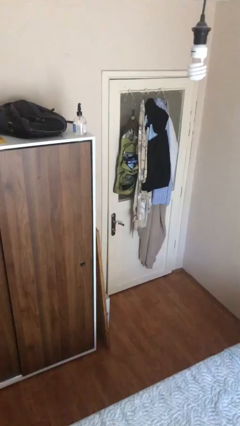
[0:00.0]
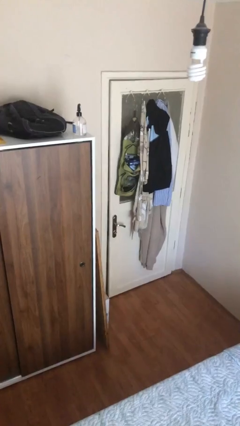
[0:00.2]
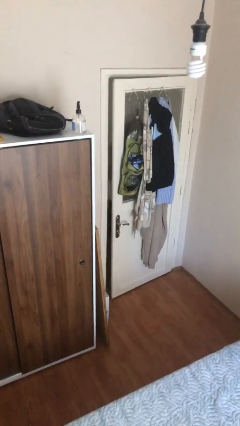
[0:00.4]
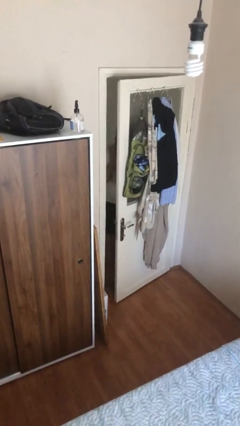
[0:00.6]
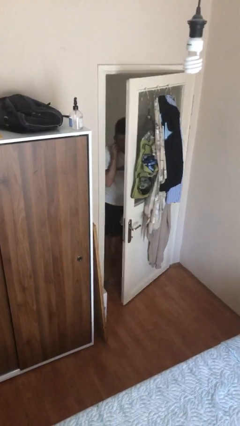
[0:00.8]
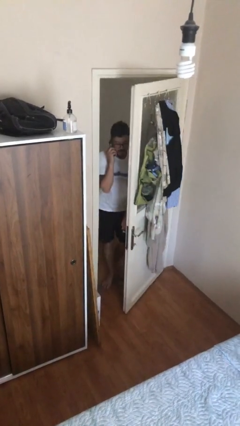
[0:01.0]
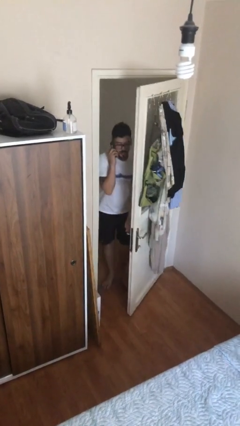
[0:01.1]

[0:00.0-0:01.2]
person opens facility door

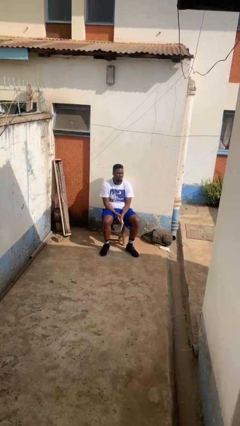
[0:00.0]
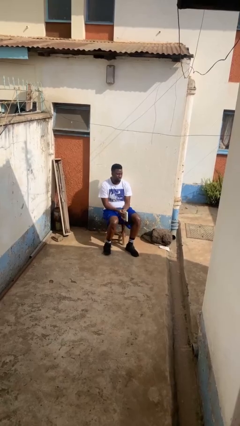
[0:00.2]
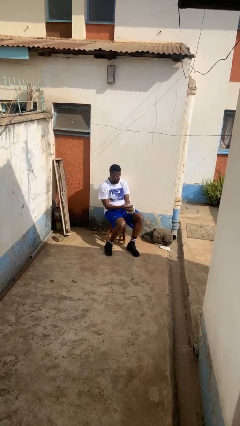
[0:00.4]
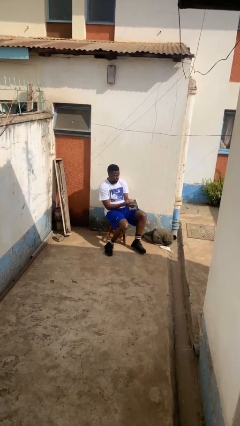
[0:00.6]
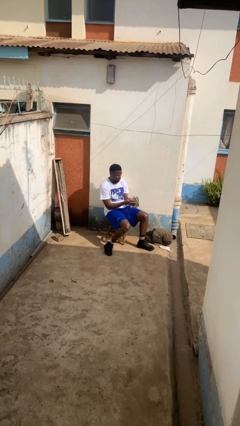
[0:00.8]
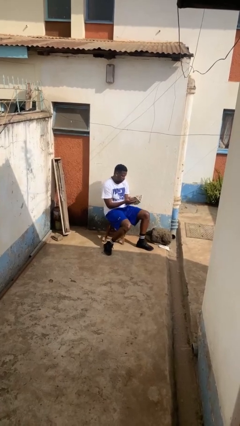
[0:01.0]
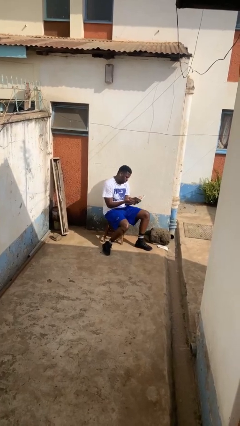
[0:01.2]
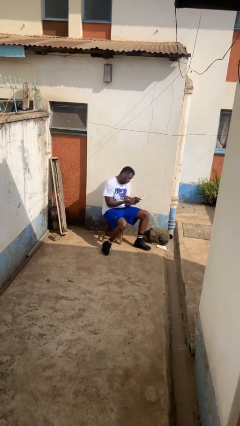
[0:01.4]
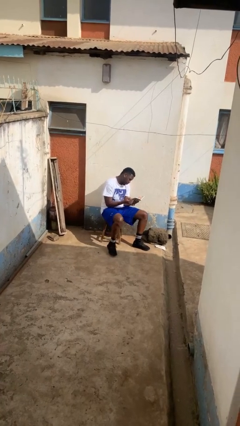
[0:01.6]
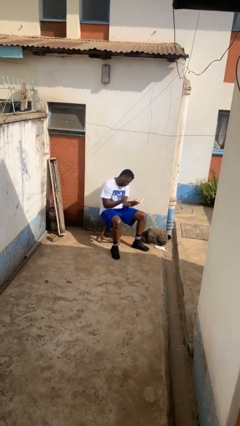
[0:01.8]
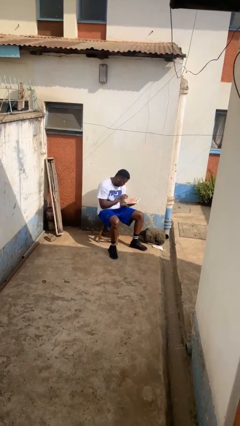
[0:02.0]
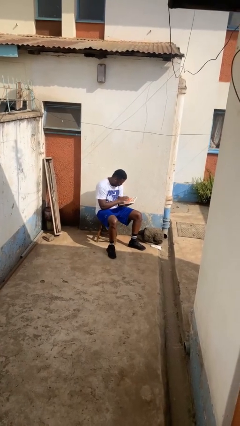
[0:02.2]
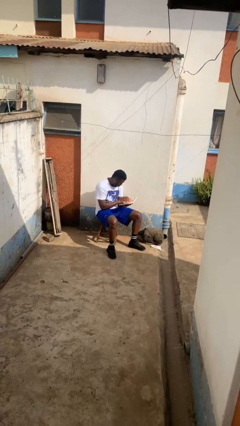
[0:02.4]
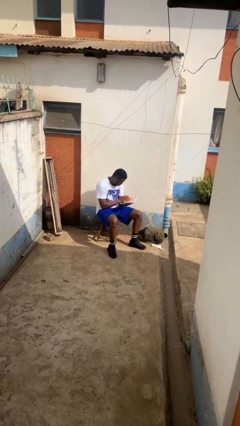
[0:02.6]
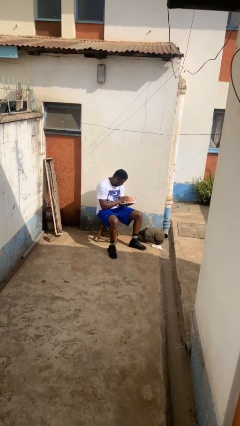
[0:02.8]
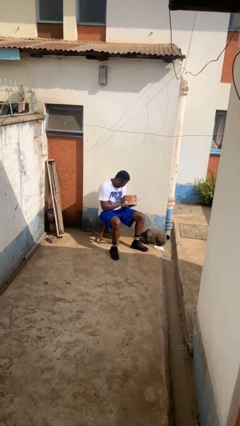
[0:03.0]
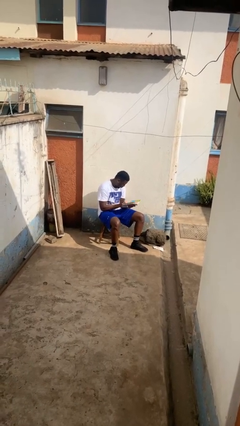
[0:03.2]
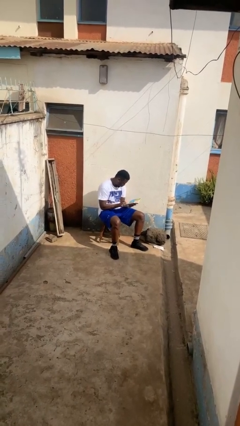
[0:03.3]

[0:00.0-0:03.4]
person reads book

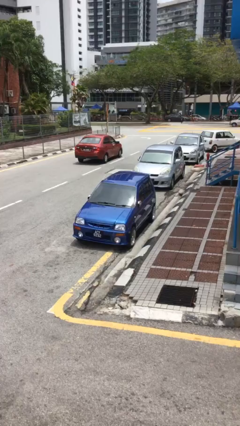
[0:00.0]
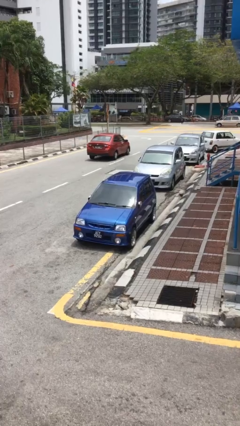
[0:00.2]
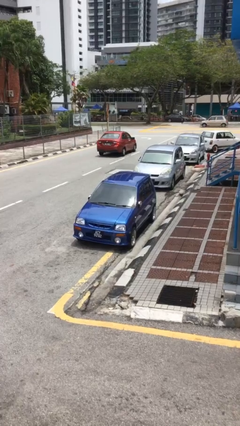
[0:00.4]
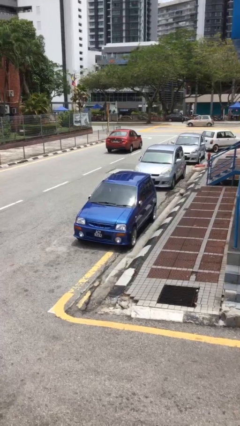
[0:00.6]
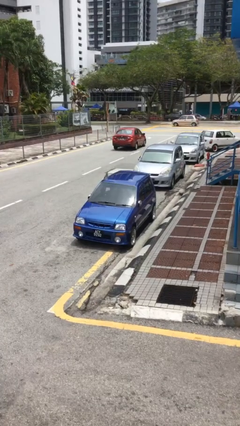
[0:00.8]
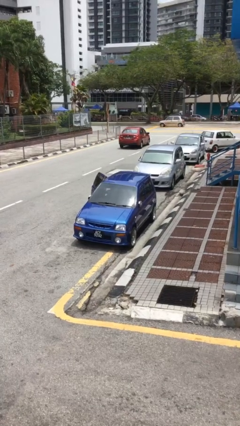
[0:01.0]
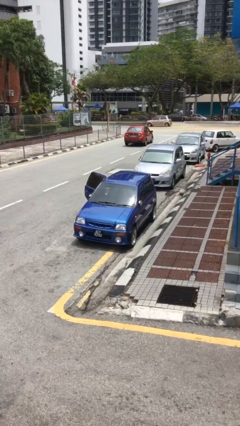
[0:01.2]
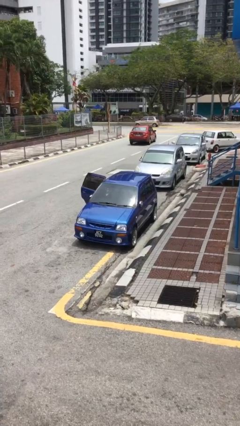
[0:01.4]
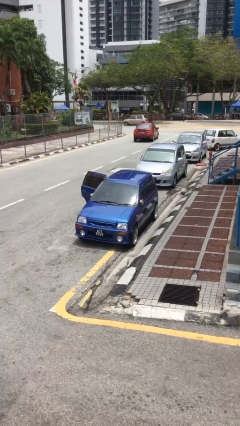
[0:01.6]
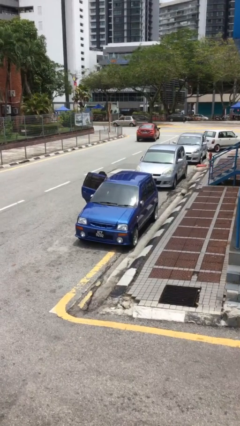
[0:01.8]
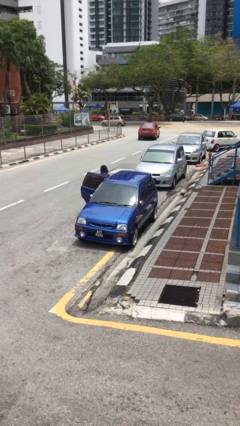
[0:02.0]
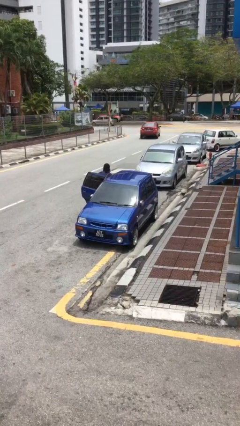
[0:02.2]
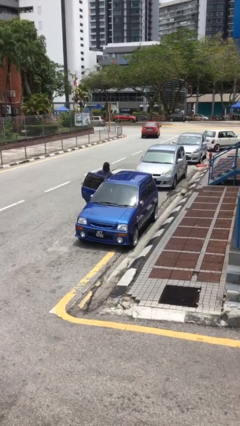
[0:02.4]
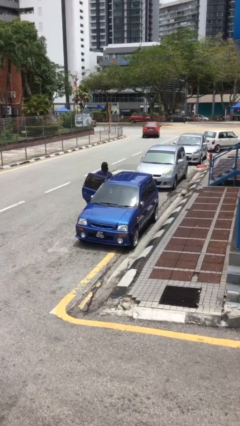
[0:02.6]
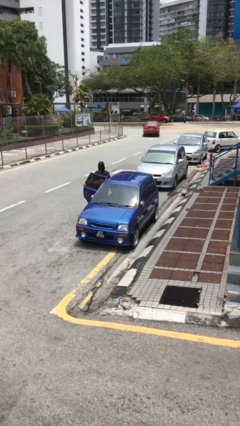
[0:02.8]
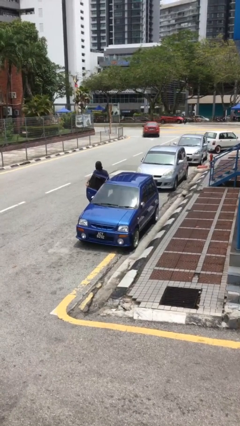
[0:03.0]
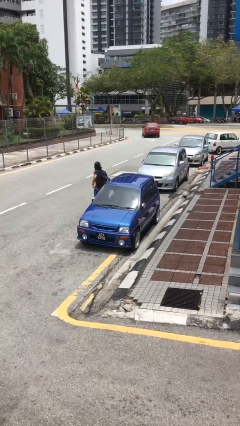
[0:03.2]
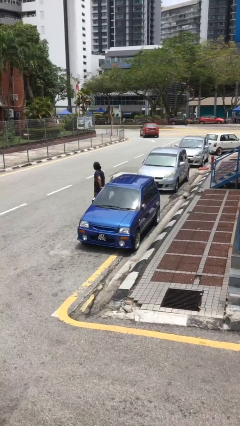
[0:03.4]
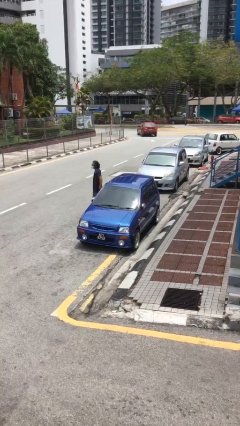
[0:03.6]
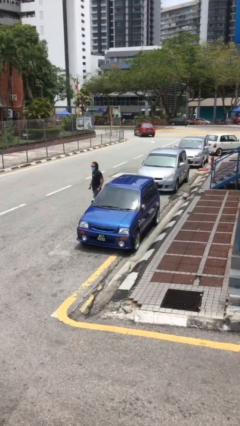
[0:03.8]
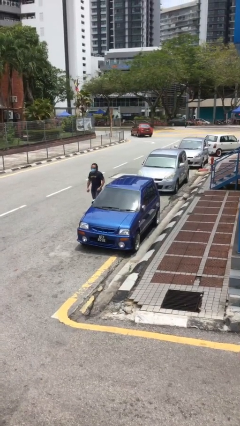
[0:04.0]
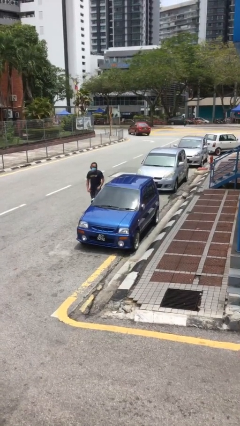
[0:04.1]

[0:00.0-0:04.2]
car drops off person

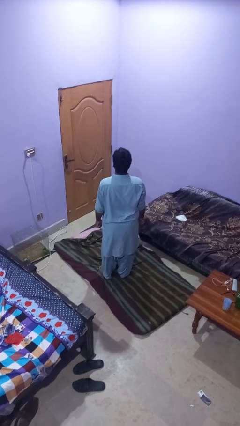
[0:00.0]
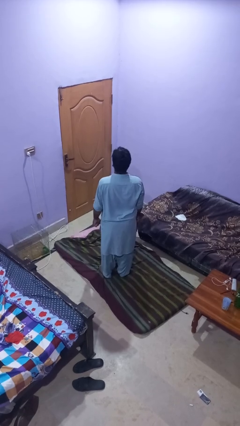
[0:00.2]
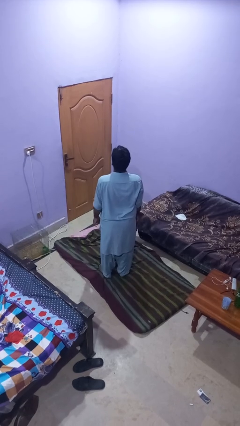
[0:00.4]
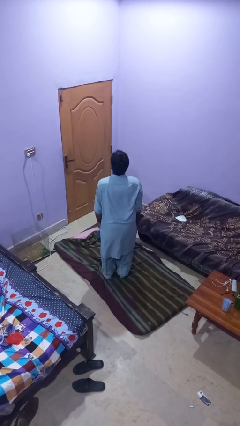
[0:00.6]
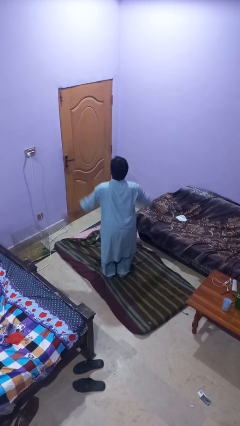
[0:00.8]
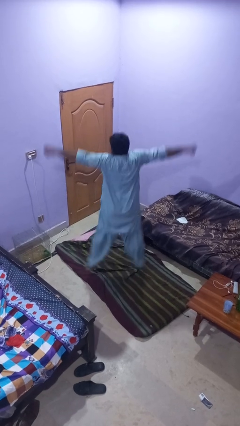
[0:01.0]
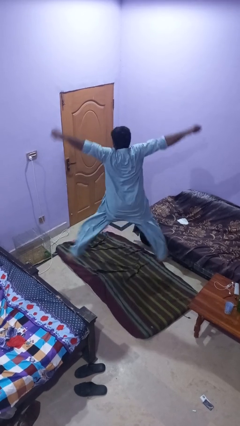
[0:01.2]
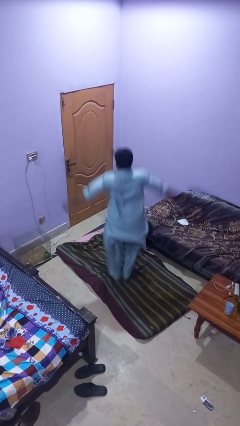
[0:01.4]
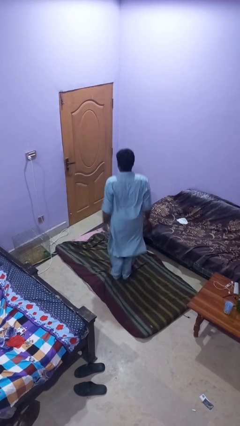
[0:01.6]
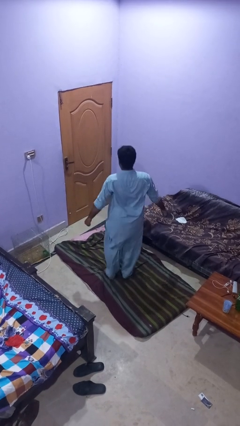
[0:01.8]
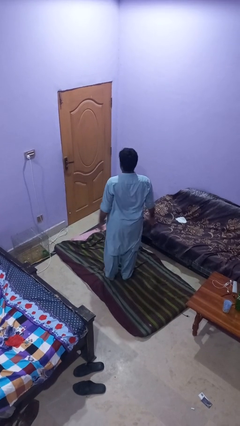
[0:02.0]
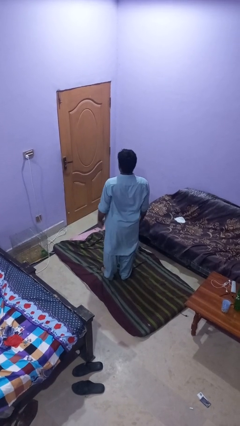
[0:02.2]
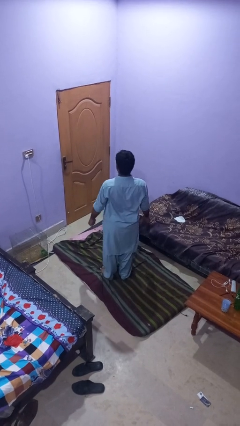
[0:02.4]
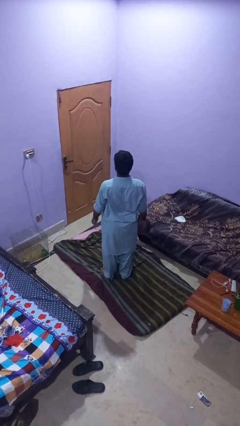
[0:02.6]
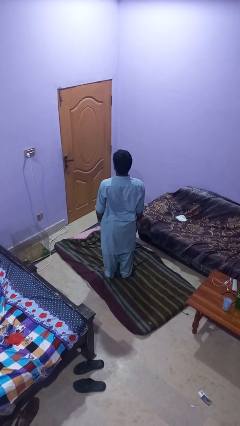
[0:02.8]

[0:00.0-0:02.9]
person exercises with jumping jacks

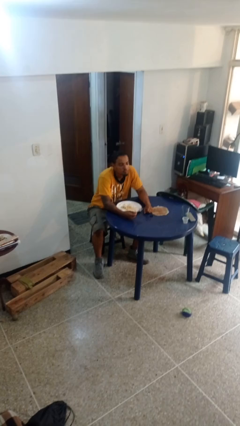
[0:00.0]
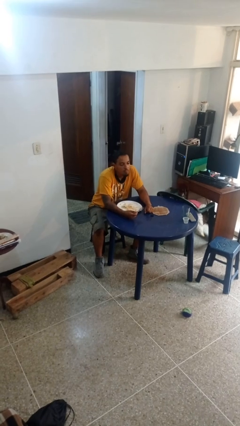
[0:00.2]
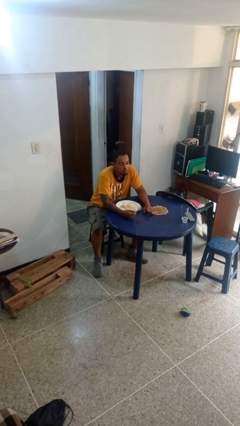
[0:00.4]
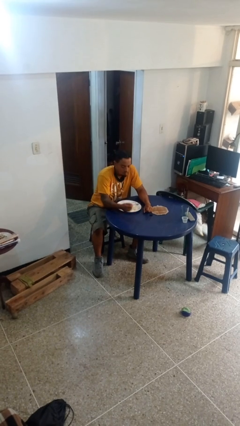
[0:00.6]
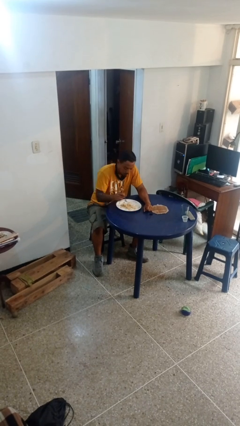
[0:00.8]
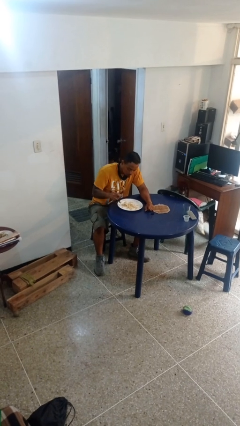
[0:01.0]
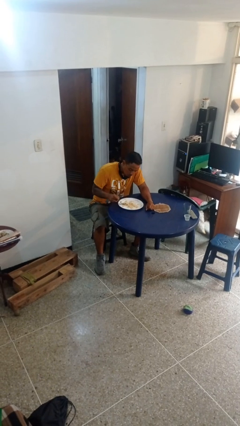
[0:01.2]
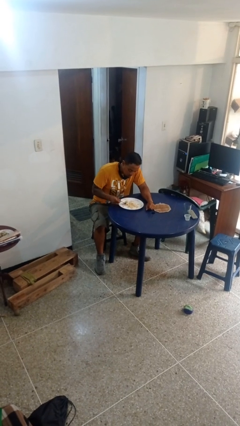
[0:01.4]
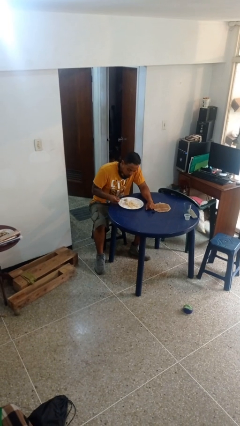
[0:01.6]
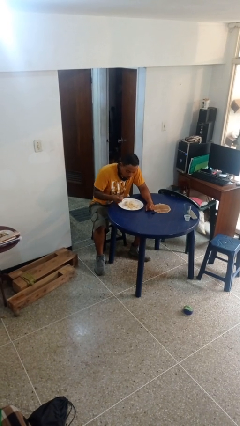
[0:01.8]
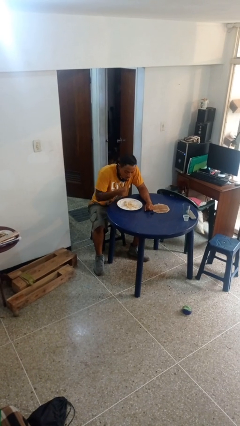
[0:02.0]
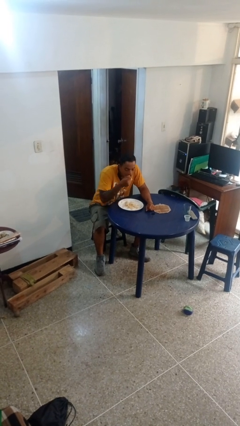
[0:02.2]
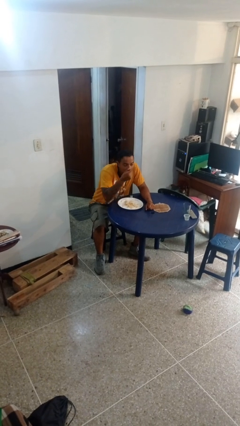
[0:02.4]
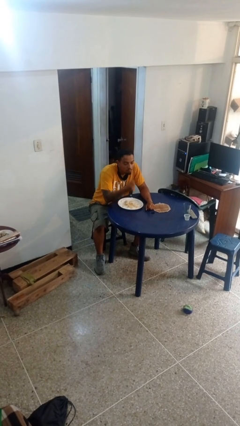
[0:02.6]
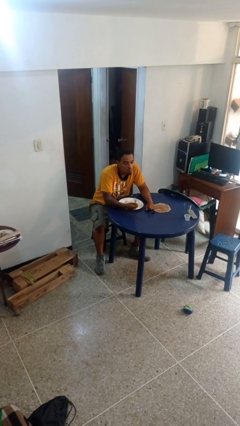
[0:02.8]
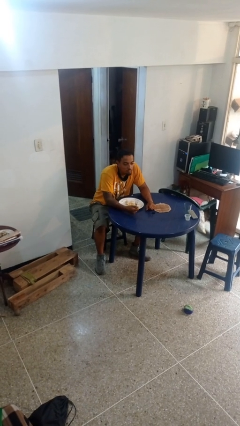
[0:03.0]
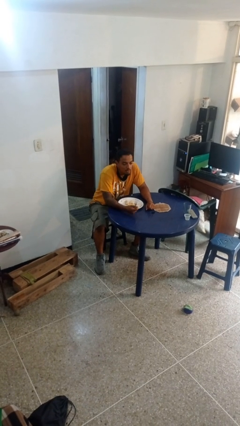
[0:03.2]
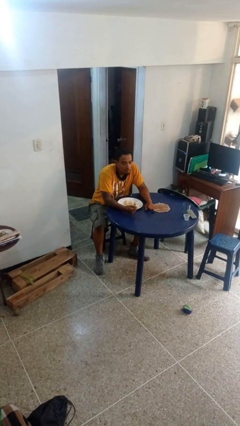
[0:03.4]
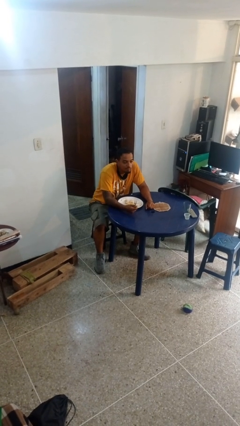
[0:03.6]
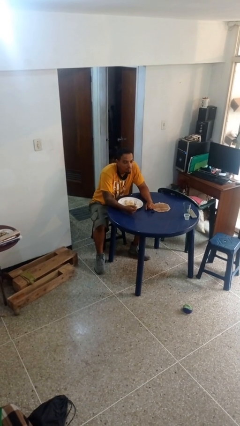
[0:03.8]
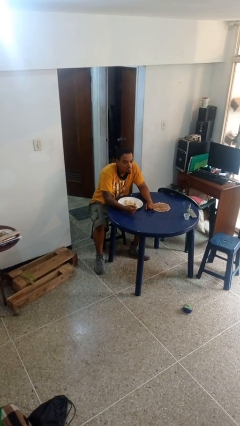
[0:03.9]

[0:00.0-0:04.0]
person eats with utensil

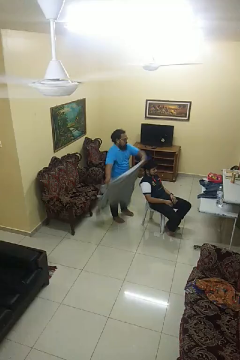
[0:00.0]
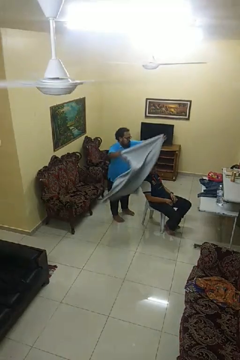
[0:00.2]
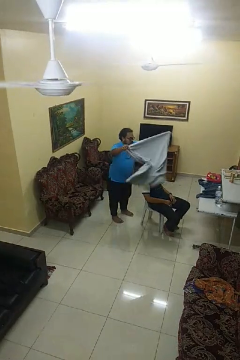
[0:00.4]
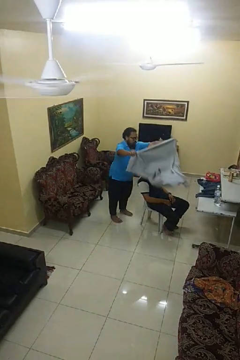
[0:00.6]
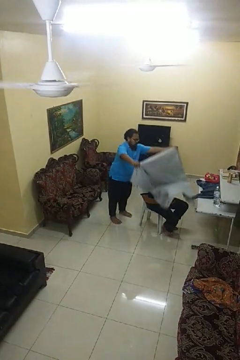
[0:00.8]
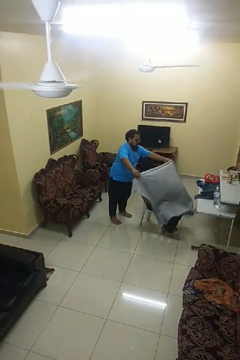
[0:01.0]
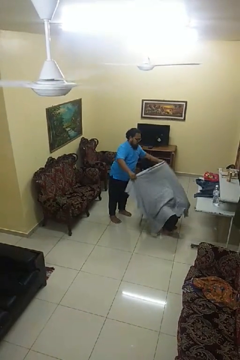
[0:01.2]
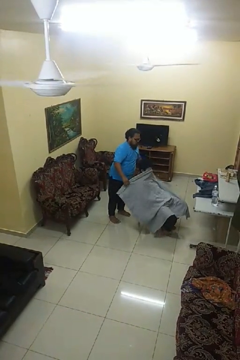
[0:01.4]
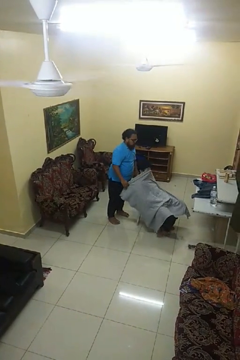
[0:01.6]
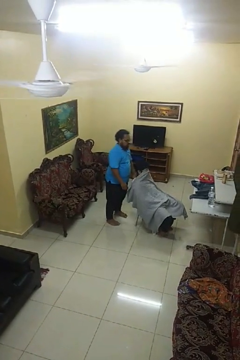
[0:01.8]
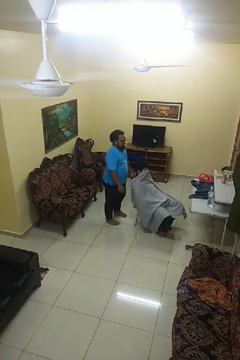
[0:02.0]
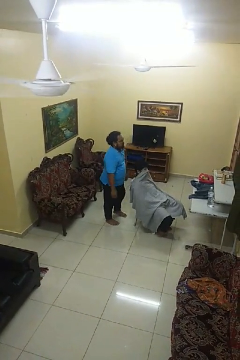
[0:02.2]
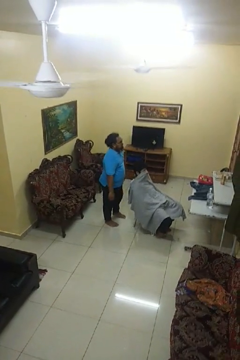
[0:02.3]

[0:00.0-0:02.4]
person covers friend with blanket
